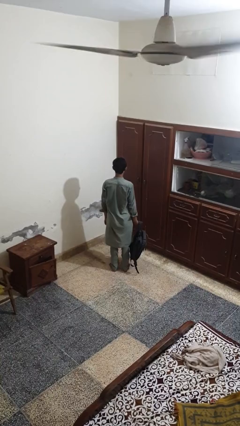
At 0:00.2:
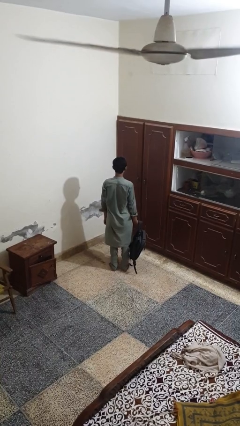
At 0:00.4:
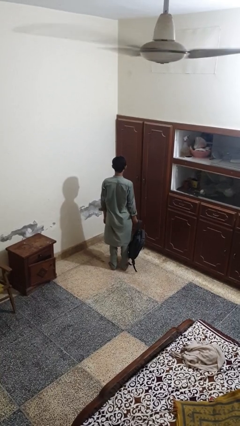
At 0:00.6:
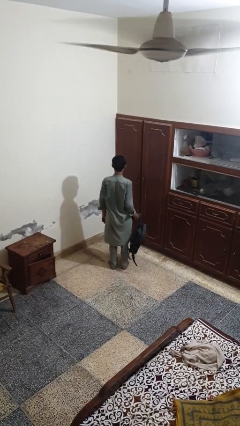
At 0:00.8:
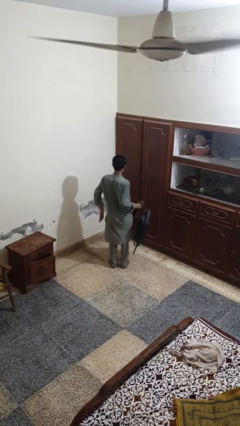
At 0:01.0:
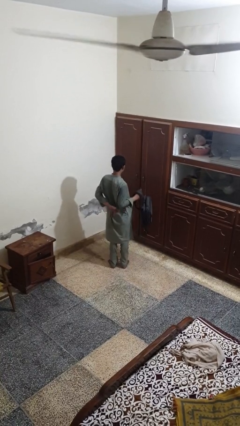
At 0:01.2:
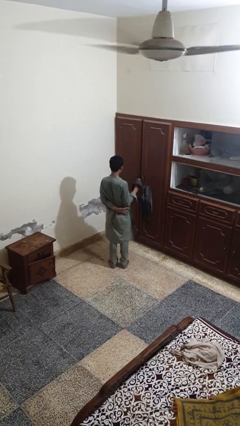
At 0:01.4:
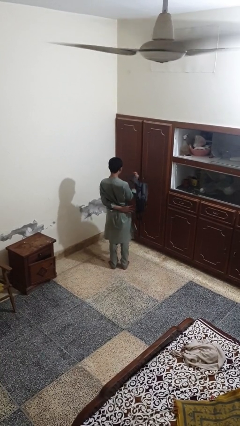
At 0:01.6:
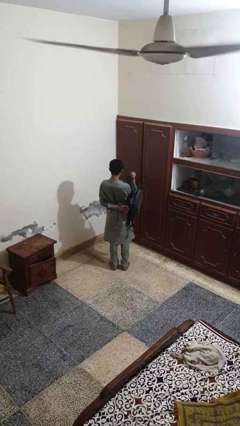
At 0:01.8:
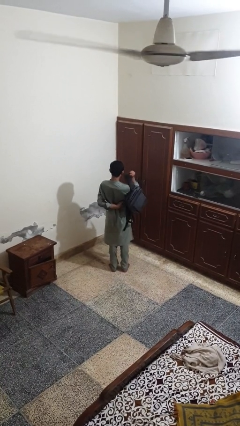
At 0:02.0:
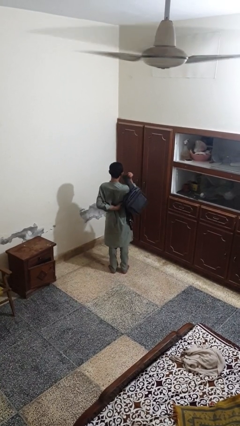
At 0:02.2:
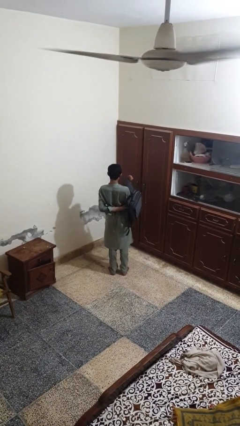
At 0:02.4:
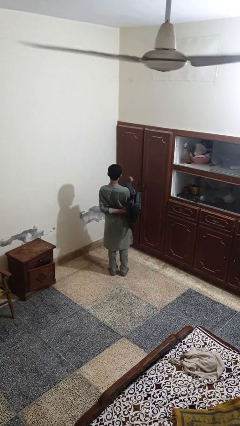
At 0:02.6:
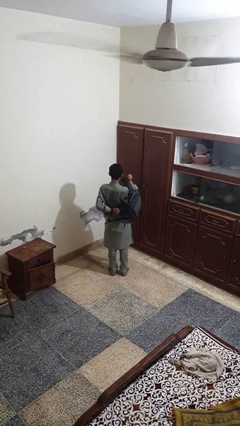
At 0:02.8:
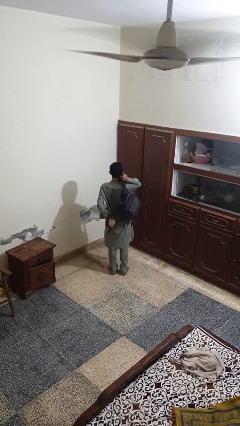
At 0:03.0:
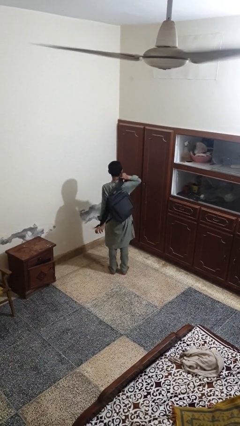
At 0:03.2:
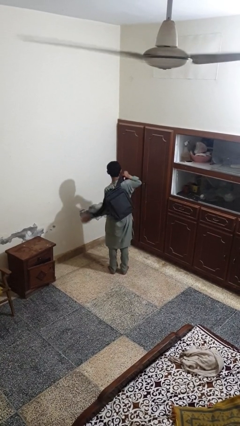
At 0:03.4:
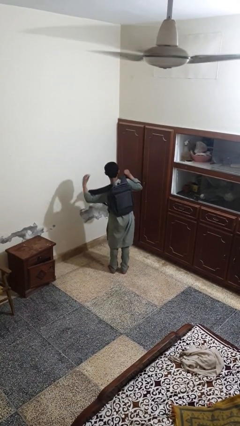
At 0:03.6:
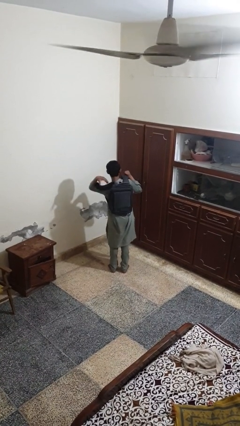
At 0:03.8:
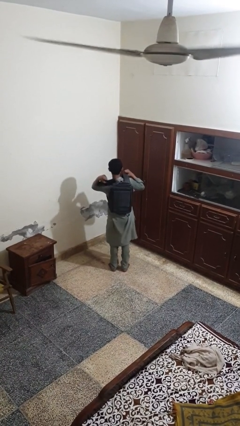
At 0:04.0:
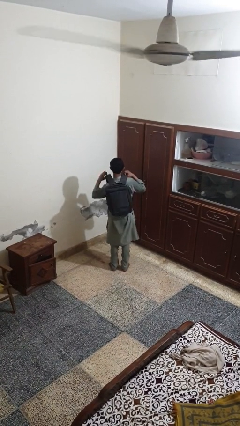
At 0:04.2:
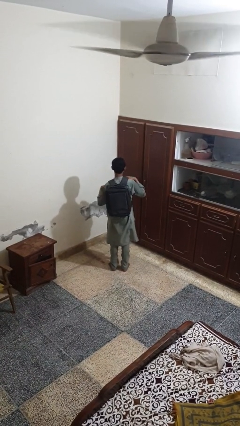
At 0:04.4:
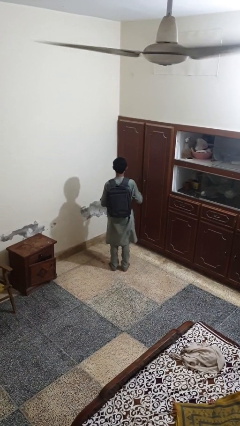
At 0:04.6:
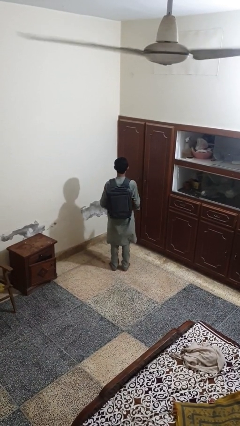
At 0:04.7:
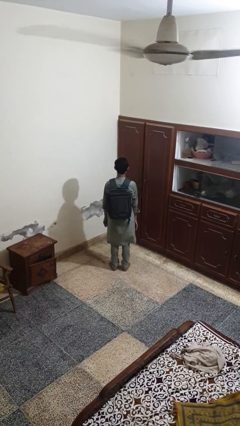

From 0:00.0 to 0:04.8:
person puts on backpack

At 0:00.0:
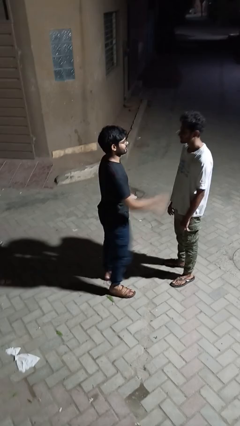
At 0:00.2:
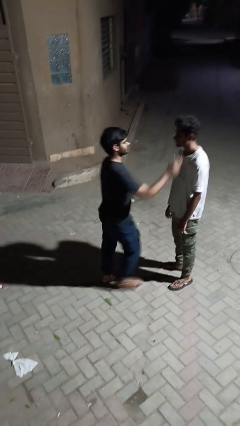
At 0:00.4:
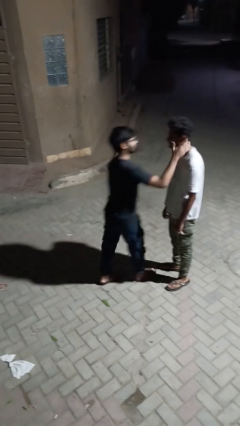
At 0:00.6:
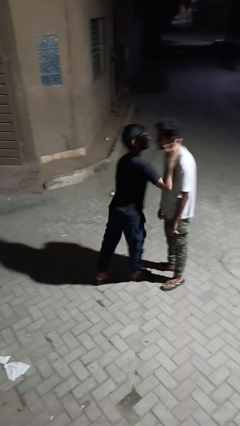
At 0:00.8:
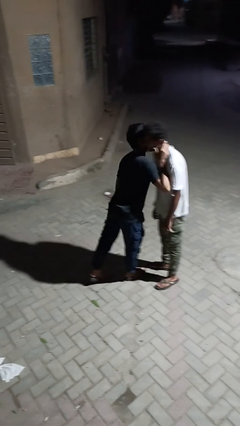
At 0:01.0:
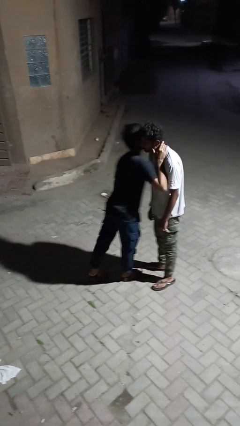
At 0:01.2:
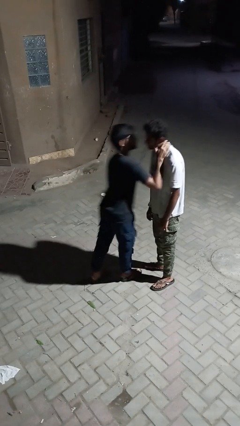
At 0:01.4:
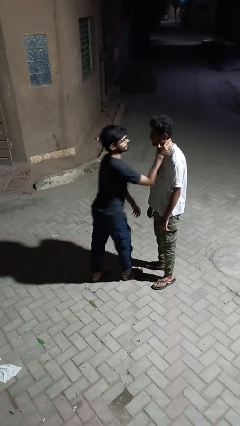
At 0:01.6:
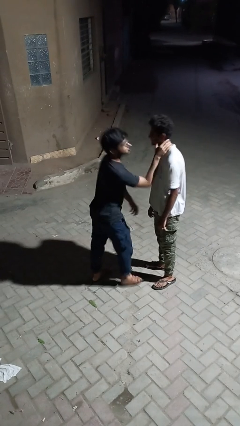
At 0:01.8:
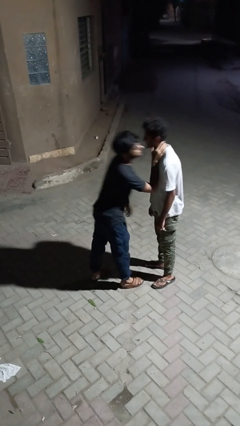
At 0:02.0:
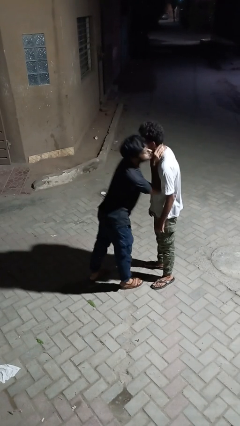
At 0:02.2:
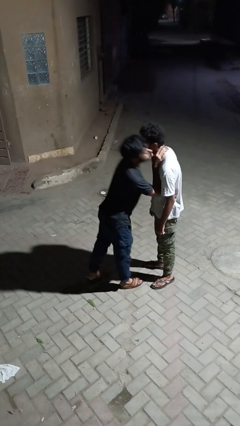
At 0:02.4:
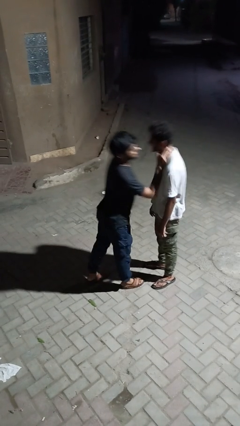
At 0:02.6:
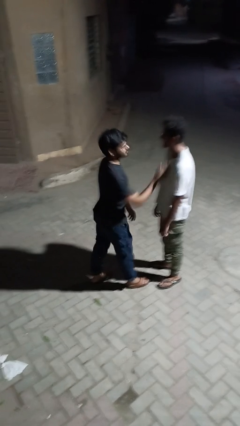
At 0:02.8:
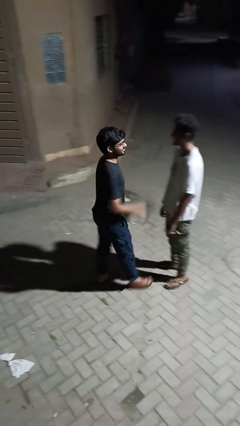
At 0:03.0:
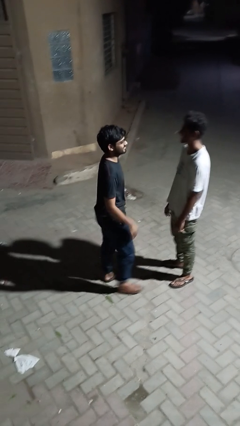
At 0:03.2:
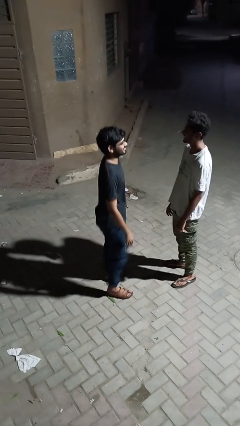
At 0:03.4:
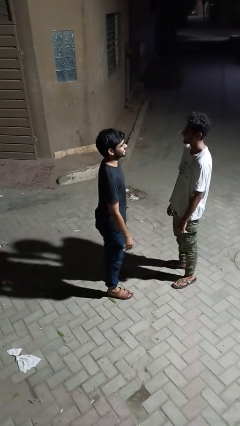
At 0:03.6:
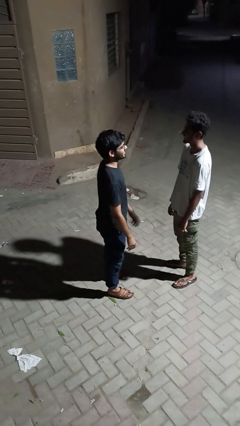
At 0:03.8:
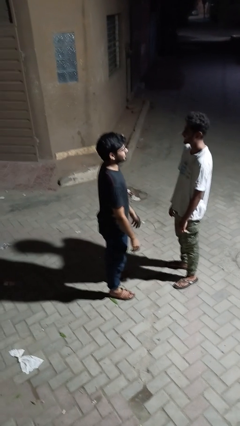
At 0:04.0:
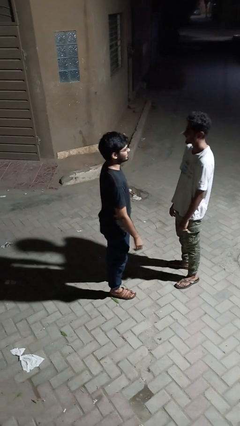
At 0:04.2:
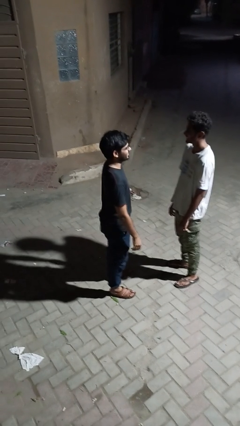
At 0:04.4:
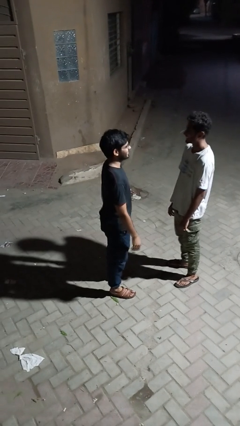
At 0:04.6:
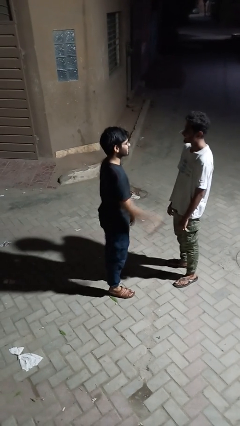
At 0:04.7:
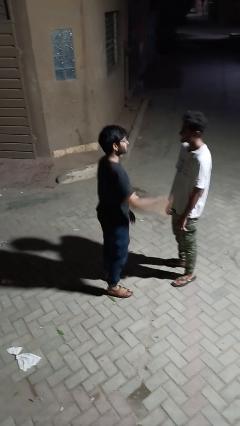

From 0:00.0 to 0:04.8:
person polishes car with rag

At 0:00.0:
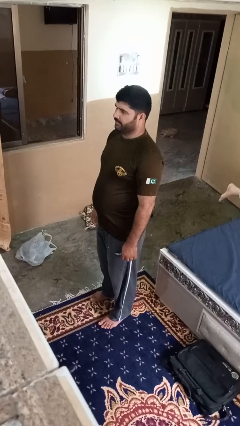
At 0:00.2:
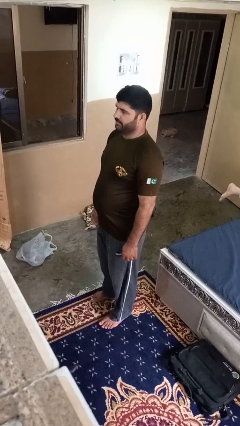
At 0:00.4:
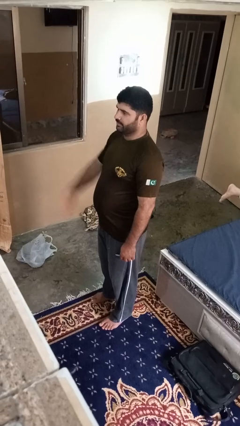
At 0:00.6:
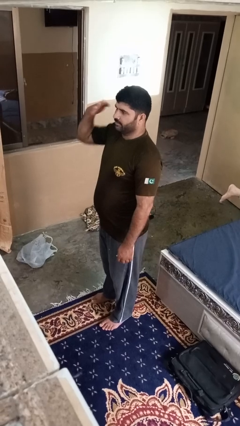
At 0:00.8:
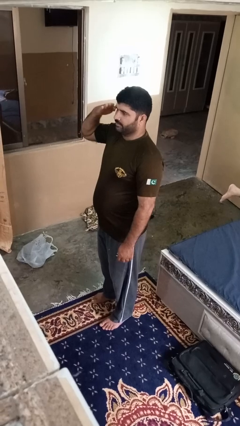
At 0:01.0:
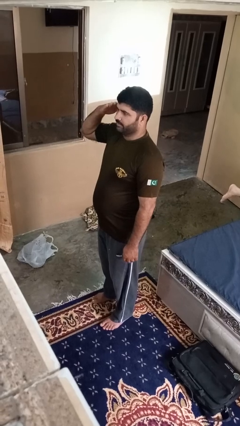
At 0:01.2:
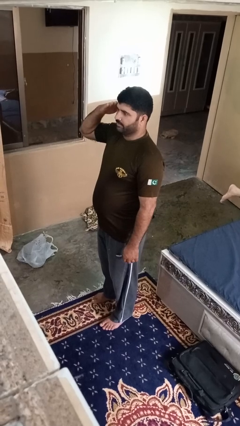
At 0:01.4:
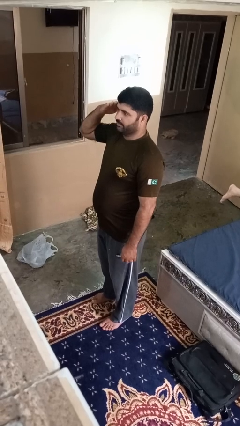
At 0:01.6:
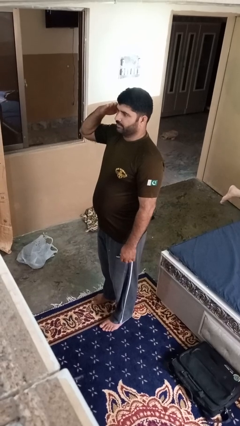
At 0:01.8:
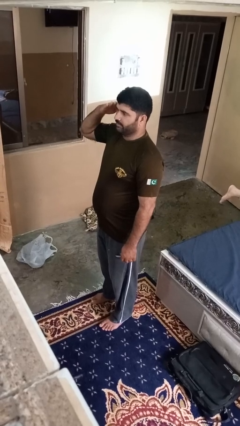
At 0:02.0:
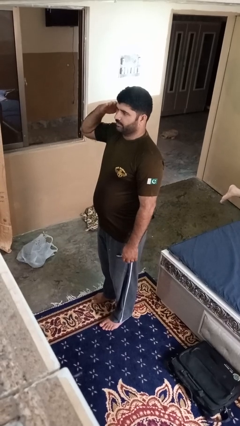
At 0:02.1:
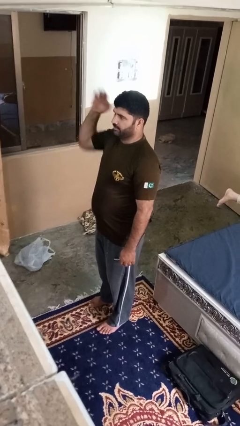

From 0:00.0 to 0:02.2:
person salutes

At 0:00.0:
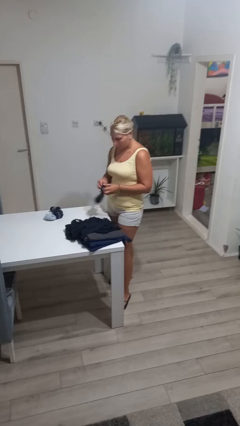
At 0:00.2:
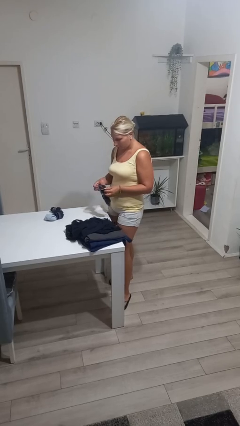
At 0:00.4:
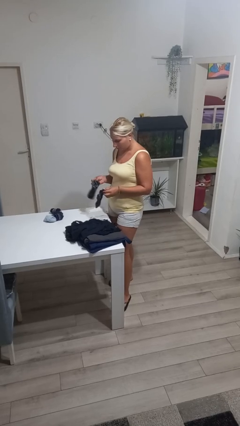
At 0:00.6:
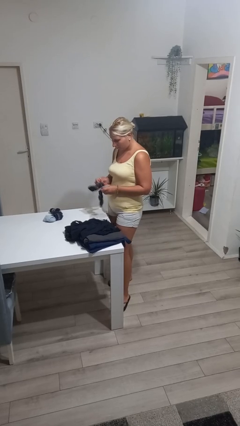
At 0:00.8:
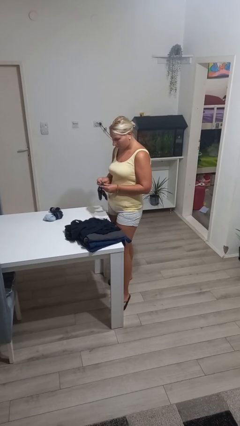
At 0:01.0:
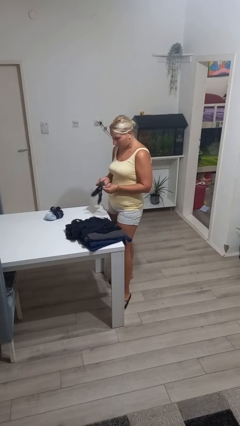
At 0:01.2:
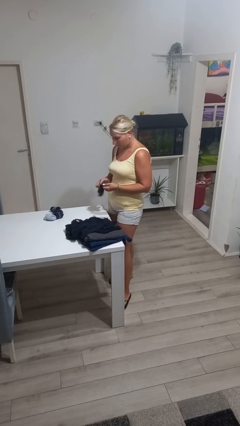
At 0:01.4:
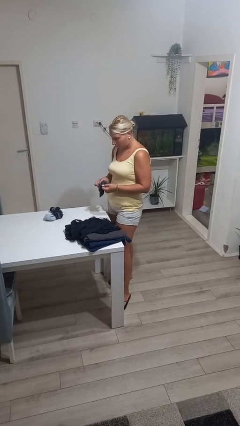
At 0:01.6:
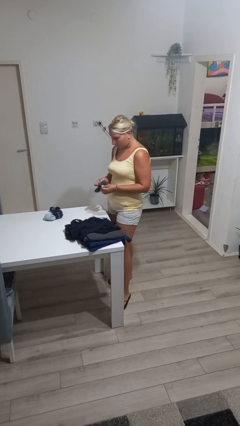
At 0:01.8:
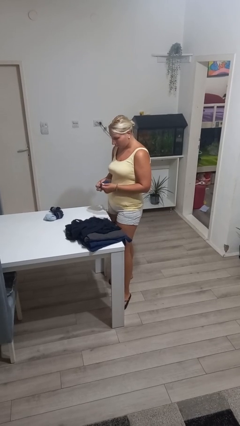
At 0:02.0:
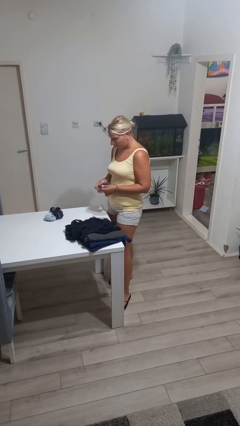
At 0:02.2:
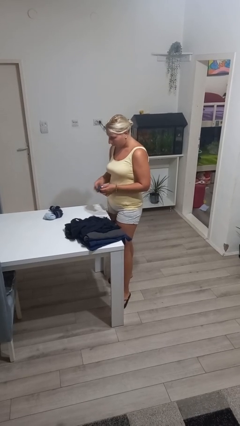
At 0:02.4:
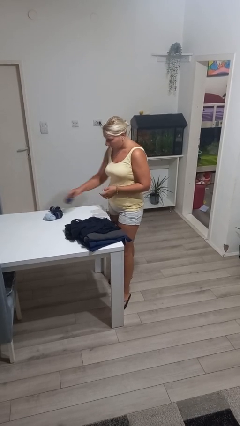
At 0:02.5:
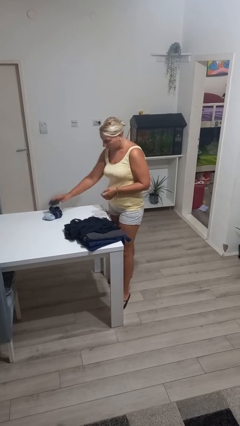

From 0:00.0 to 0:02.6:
person folds socks

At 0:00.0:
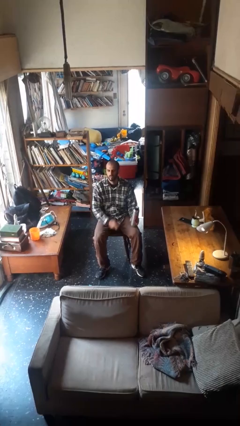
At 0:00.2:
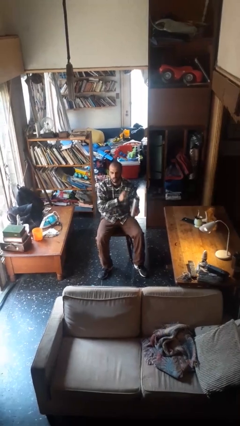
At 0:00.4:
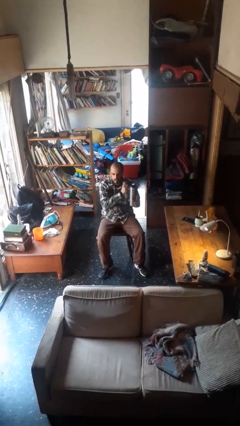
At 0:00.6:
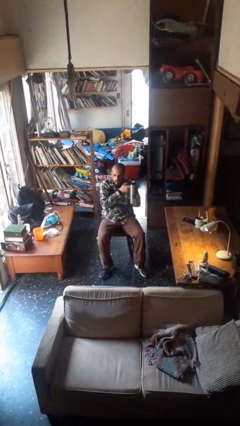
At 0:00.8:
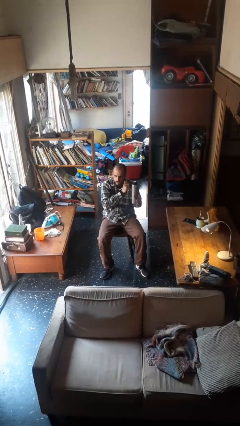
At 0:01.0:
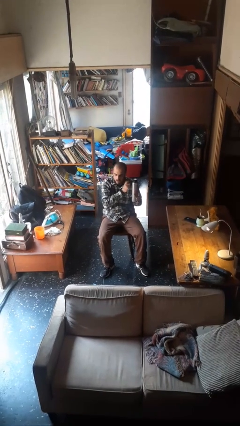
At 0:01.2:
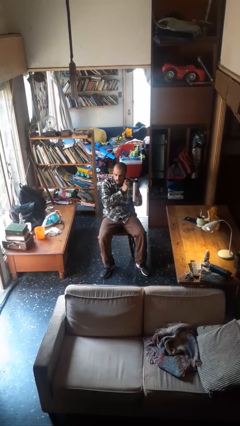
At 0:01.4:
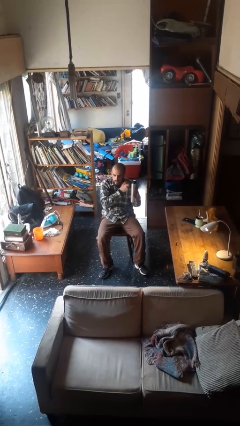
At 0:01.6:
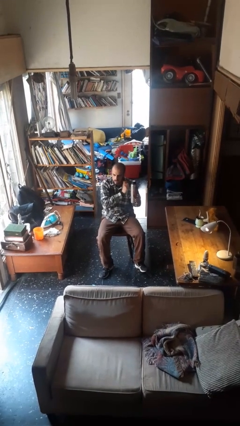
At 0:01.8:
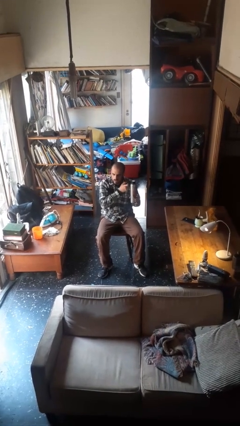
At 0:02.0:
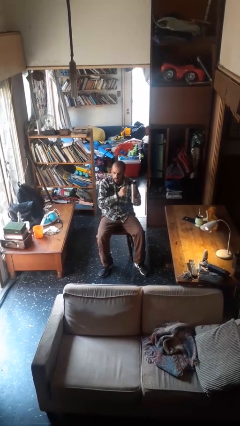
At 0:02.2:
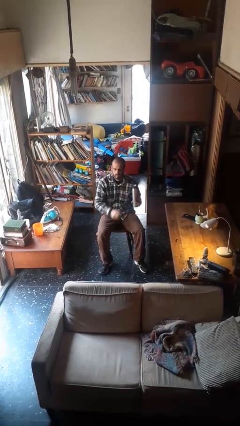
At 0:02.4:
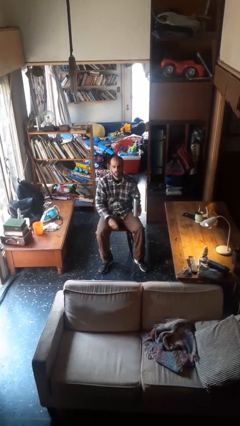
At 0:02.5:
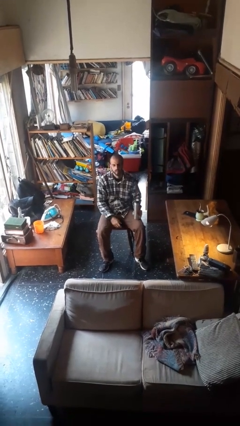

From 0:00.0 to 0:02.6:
person taps object with finger

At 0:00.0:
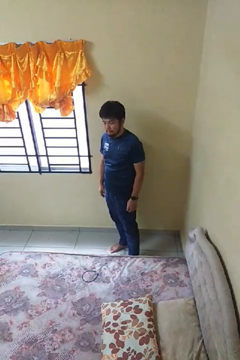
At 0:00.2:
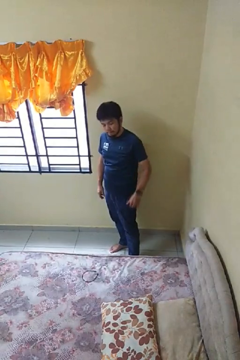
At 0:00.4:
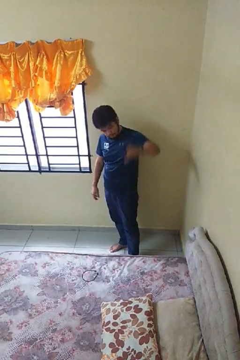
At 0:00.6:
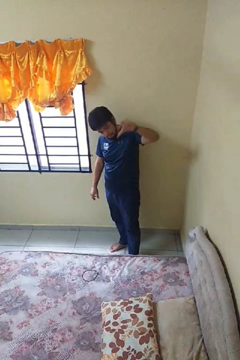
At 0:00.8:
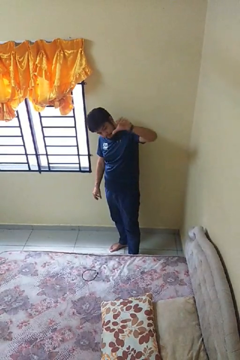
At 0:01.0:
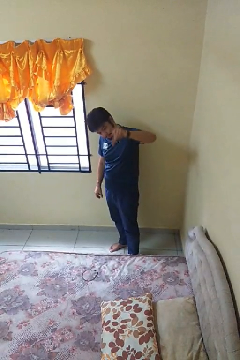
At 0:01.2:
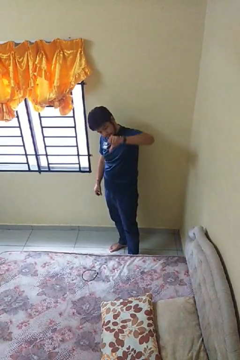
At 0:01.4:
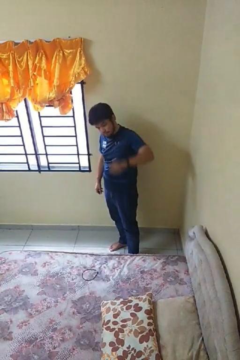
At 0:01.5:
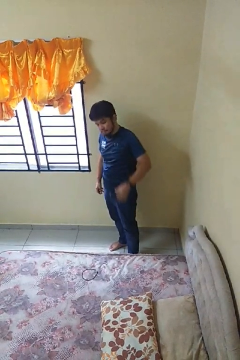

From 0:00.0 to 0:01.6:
person gestures thumbs down
